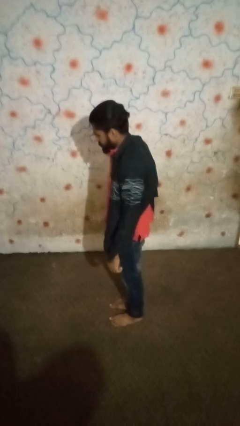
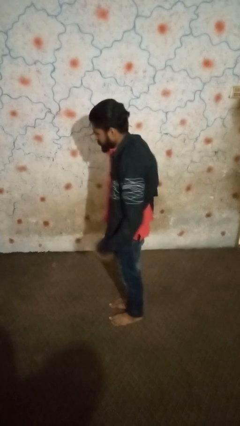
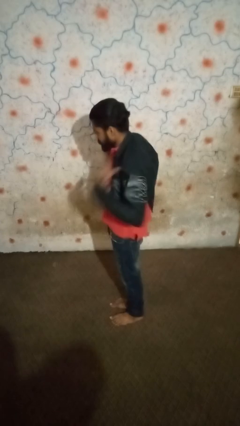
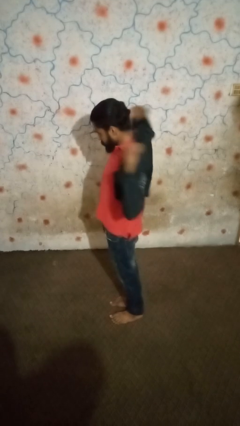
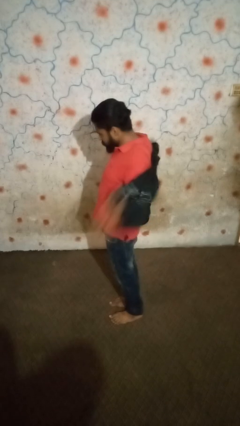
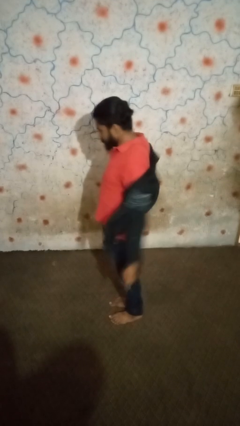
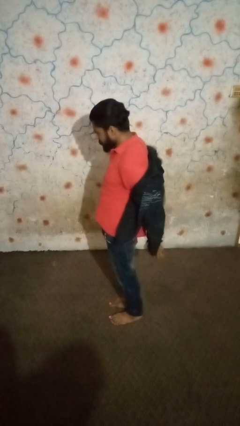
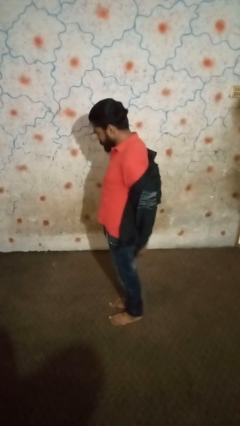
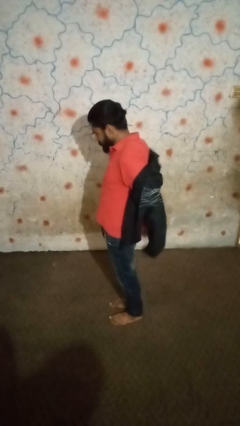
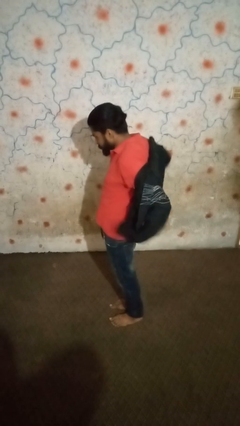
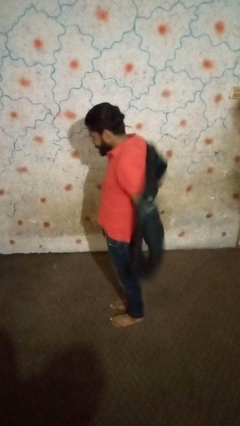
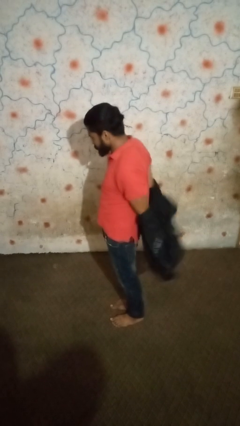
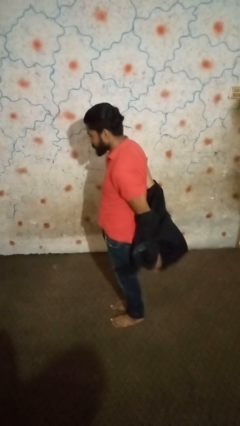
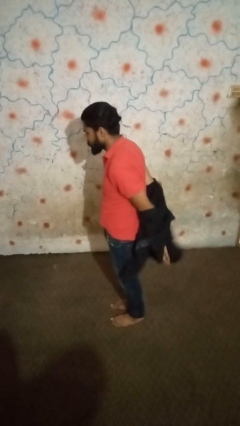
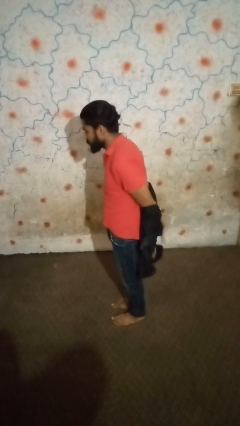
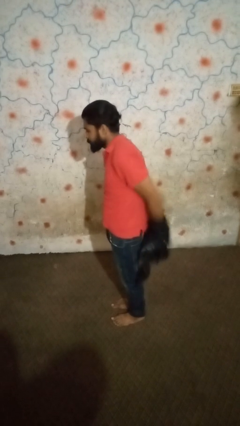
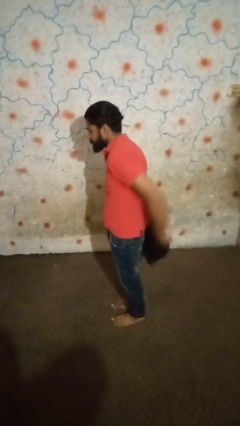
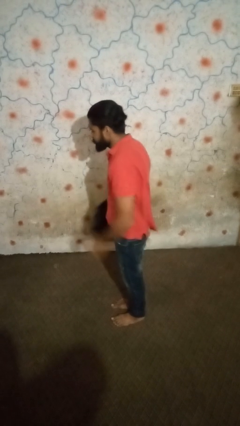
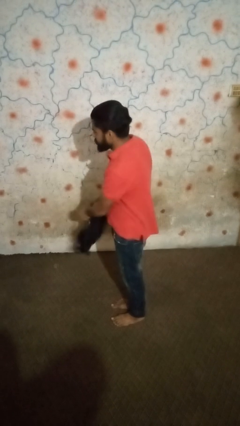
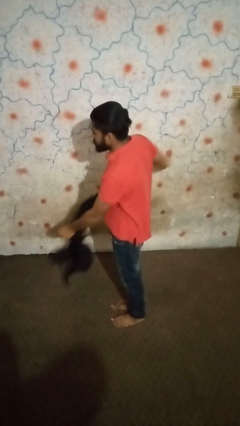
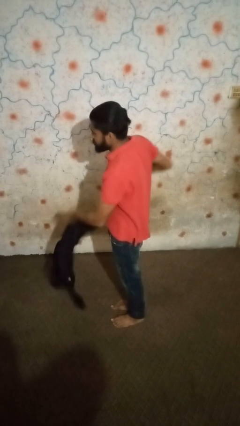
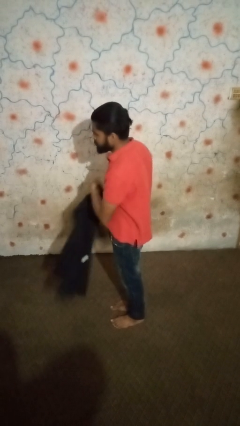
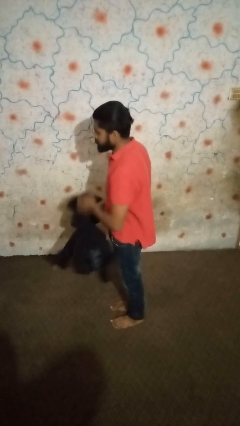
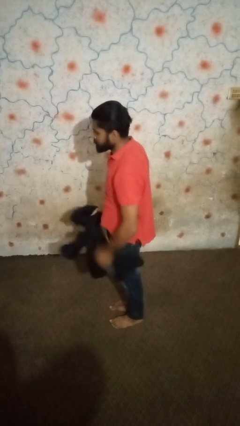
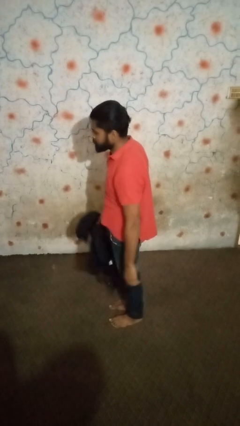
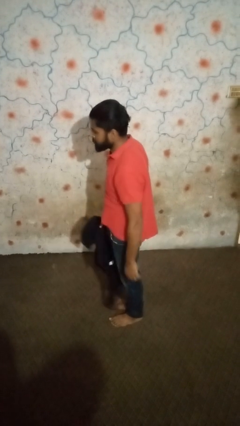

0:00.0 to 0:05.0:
person takes off shirt

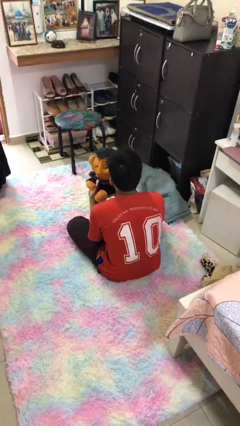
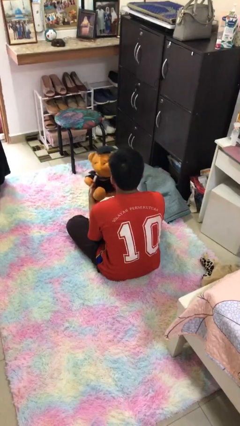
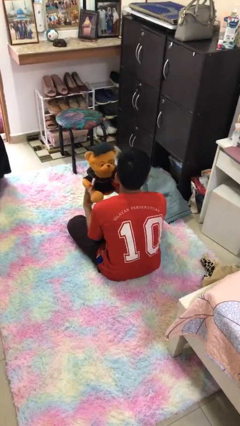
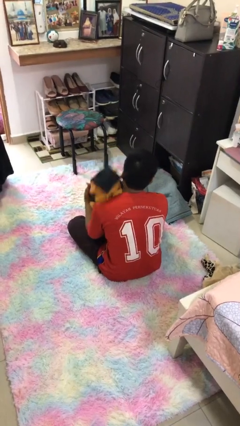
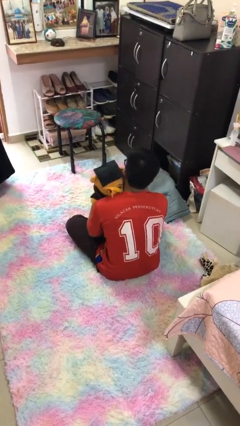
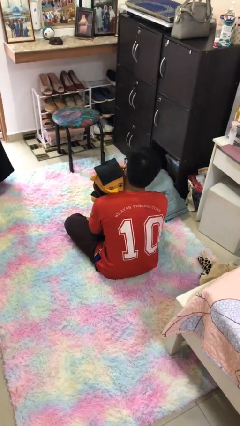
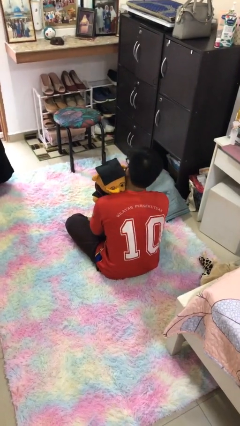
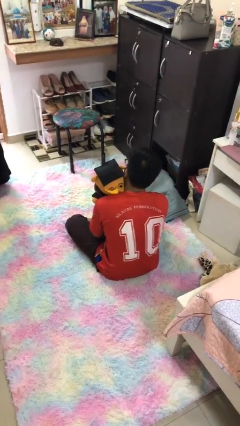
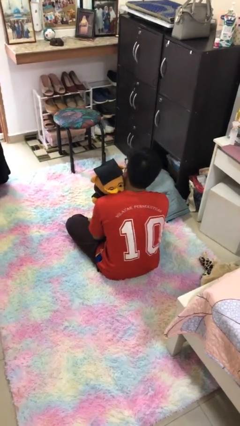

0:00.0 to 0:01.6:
person hugs stuffed animal

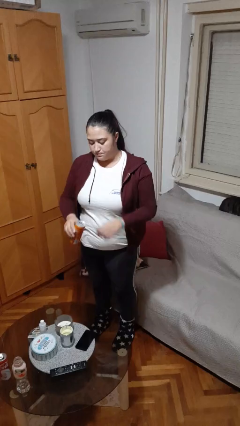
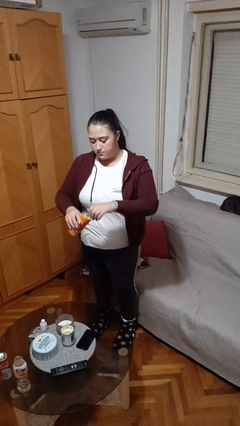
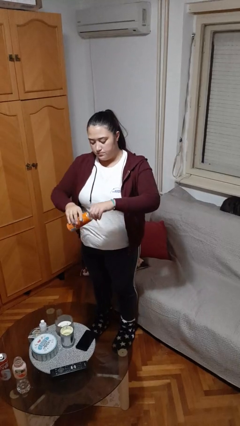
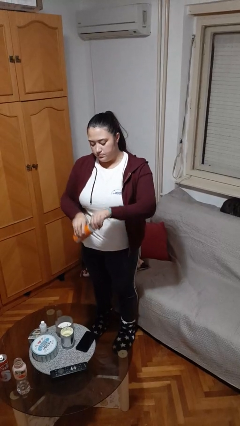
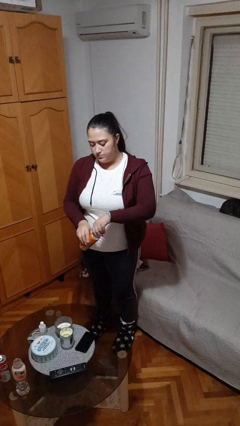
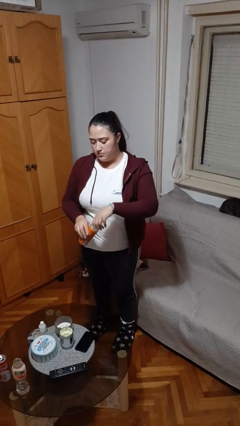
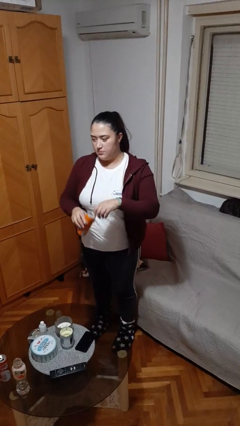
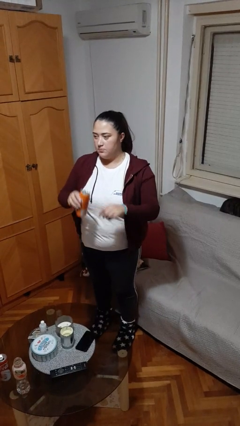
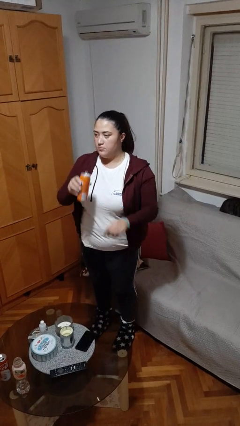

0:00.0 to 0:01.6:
person opens beverage can

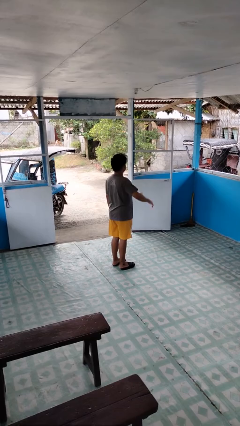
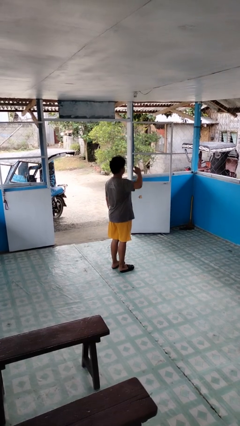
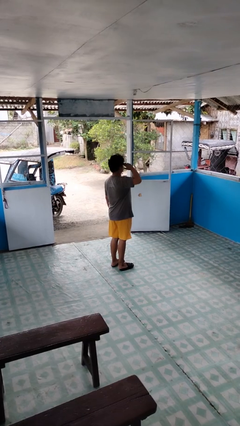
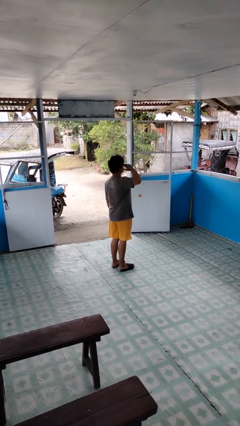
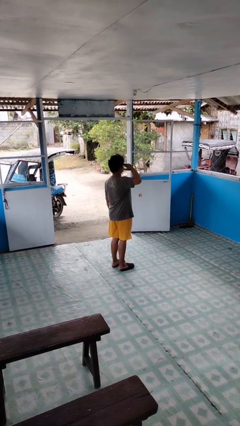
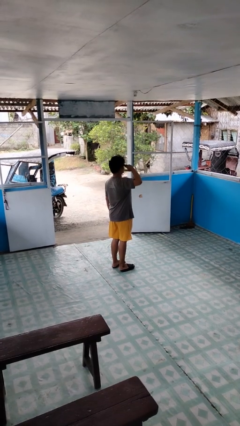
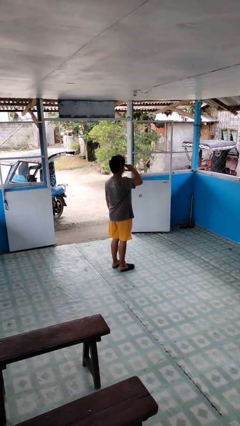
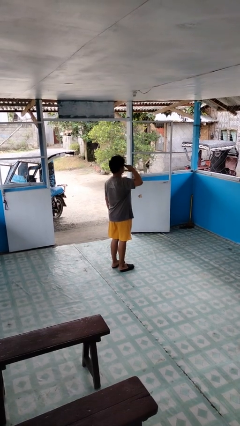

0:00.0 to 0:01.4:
person salutes

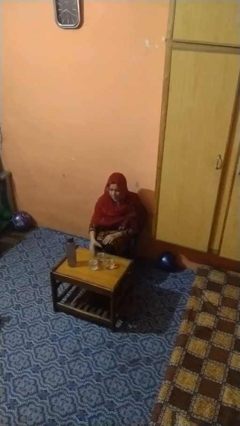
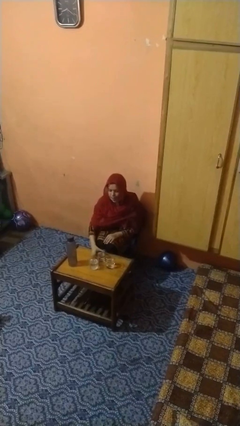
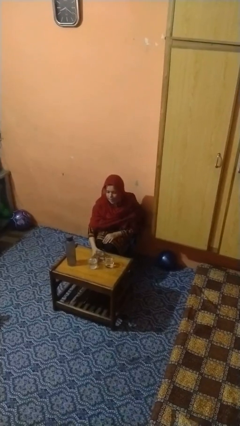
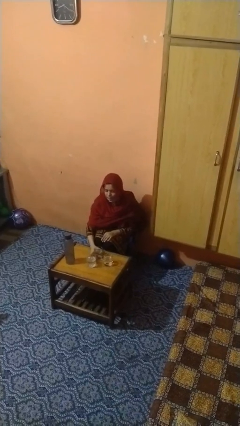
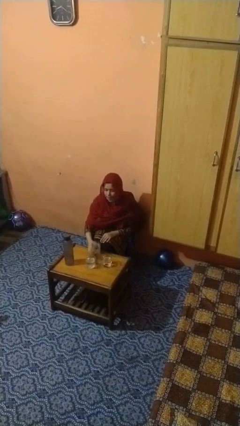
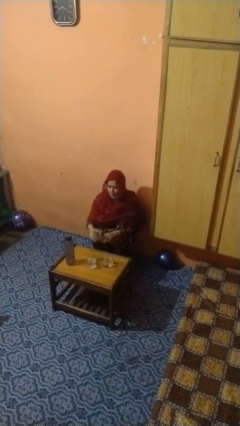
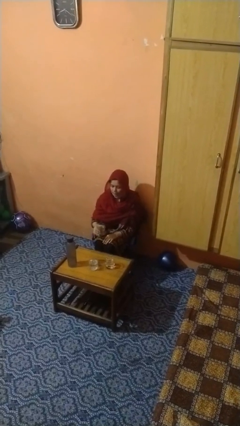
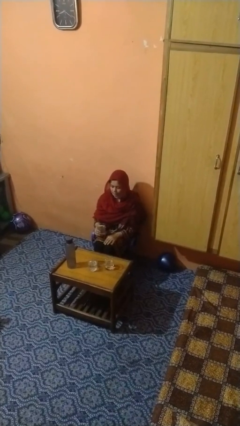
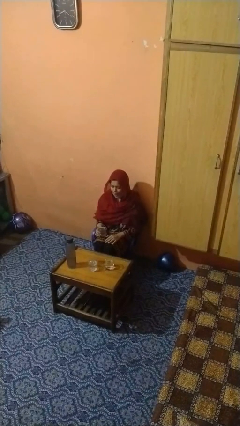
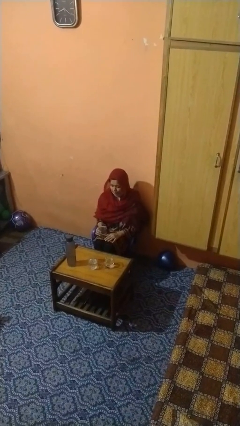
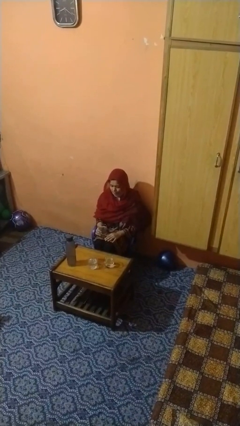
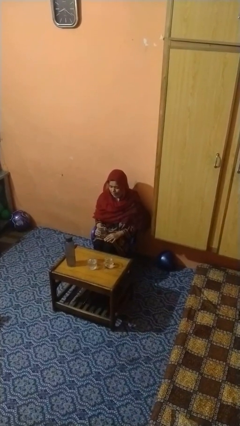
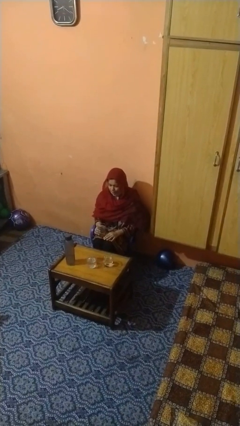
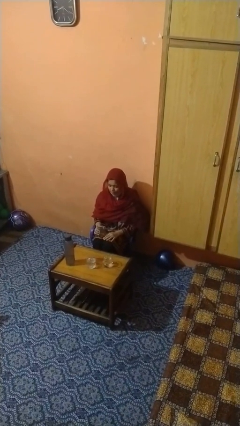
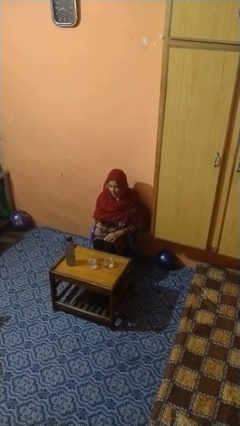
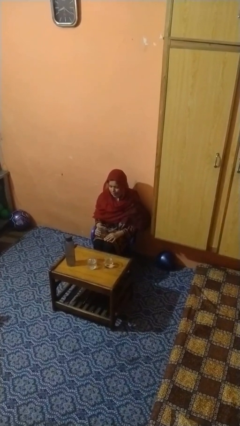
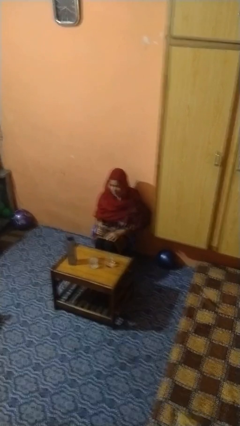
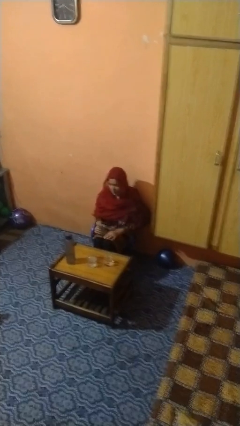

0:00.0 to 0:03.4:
person picks up object from table

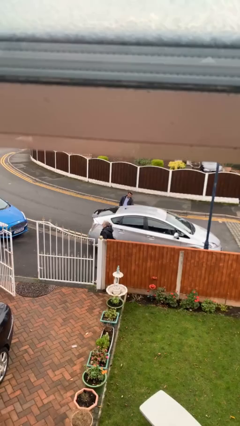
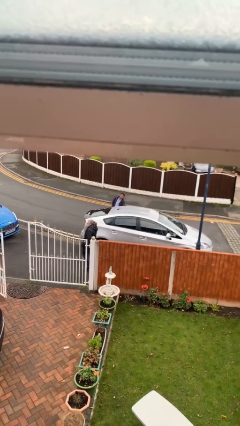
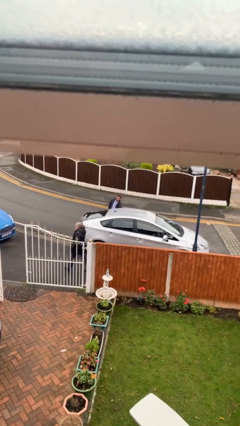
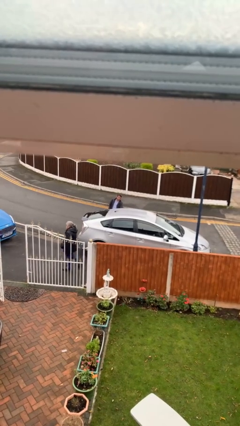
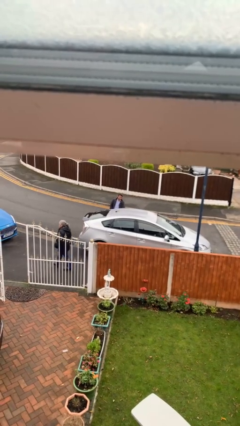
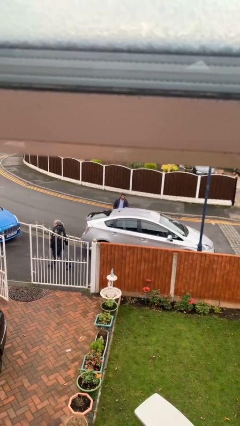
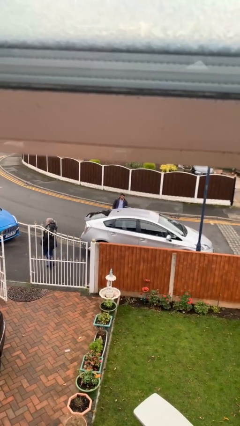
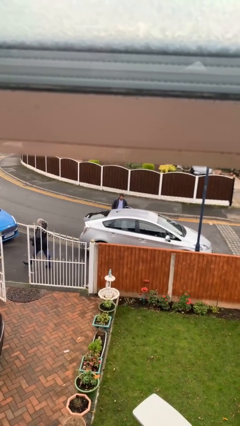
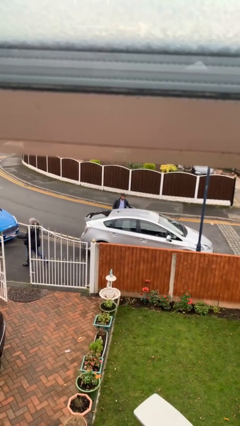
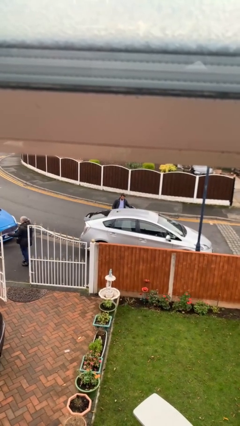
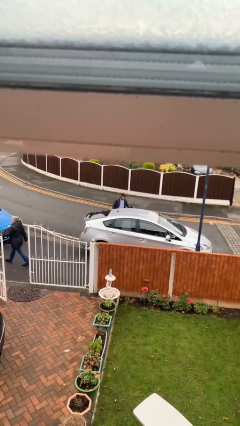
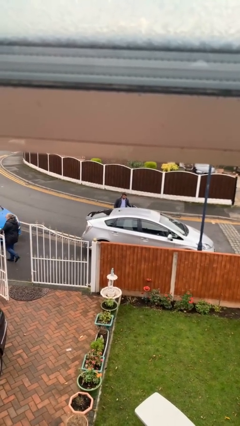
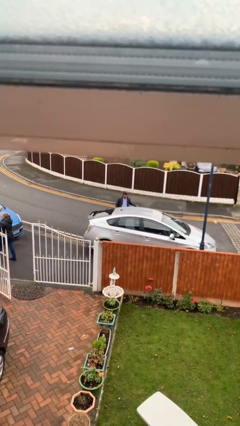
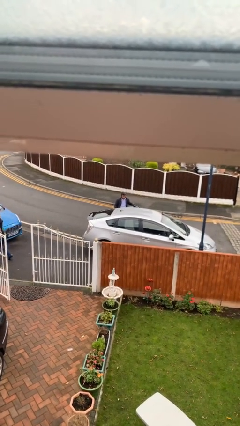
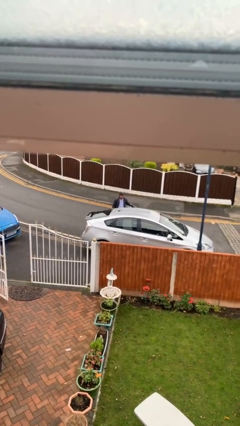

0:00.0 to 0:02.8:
person opens car door

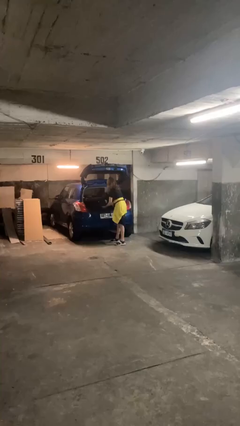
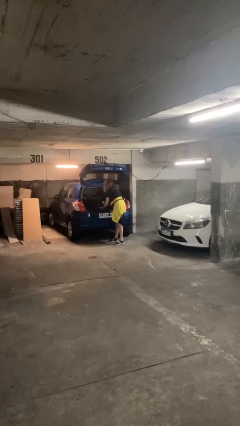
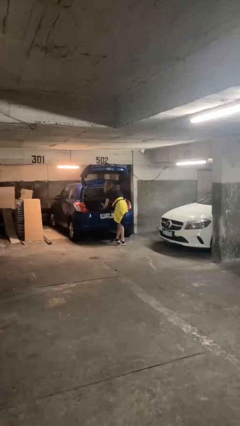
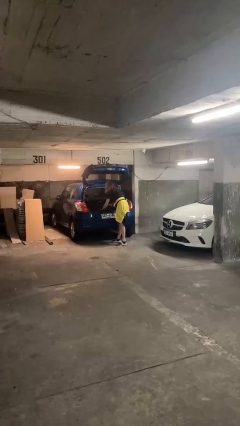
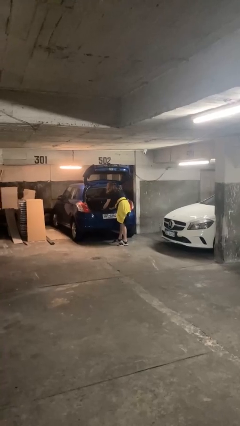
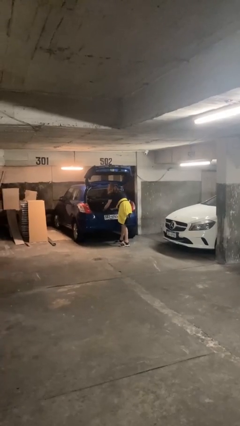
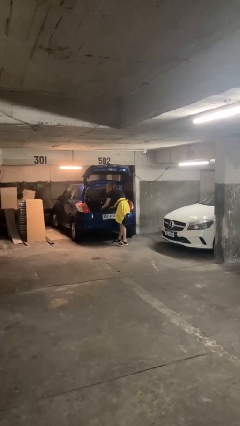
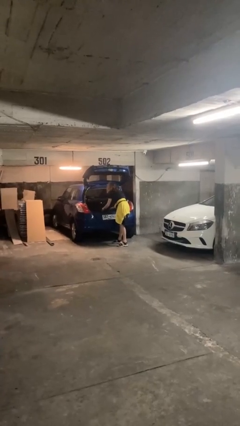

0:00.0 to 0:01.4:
person loads car
